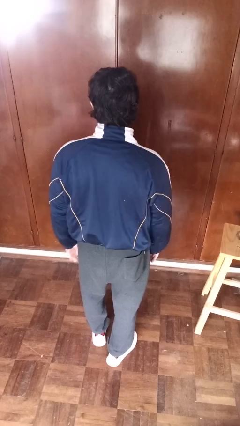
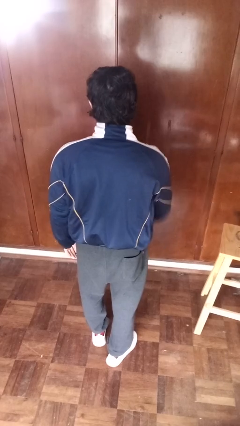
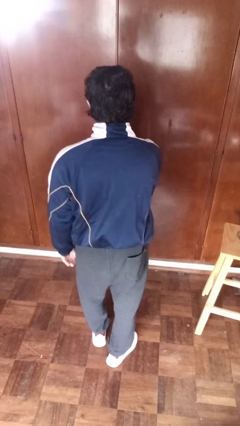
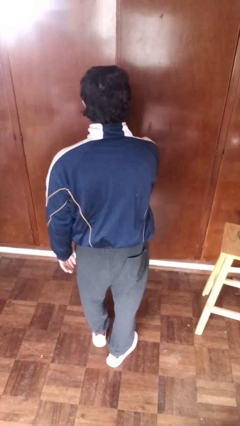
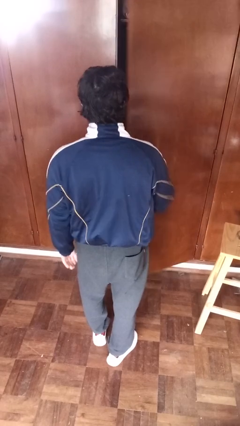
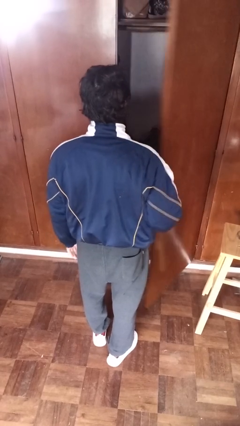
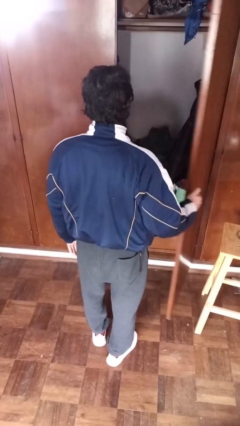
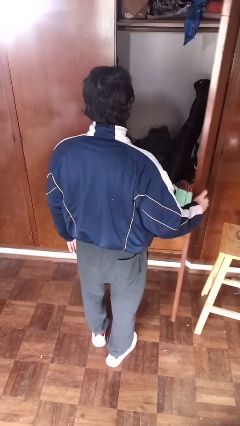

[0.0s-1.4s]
person opens closet door

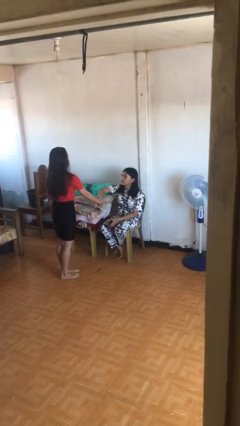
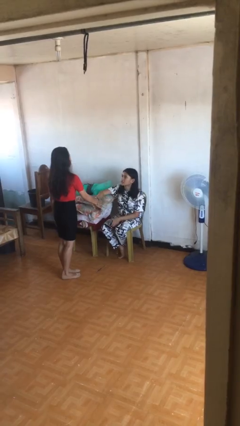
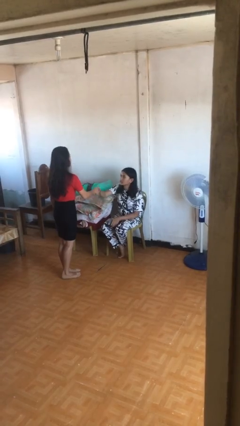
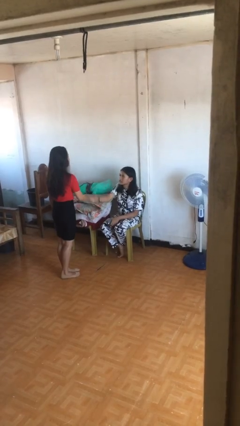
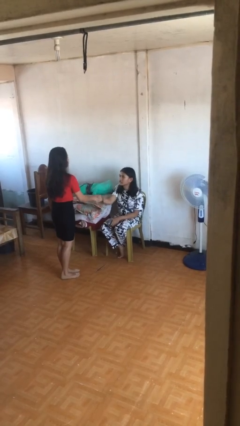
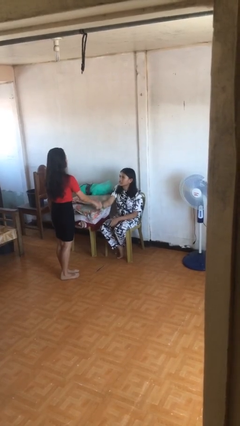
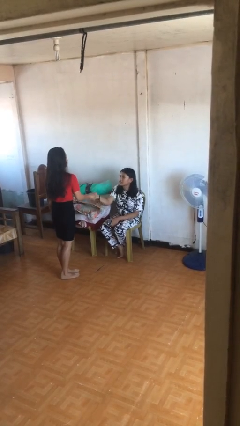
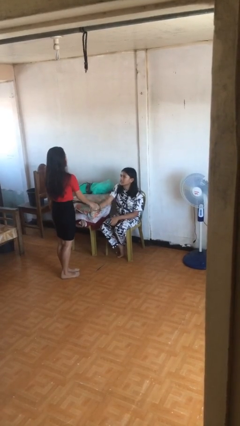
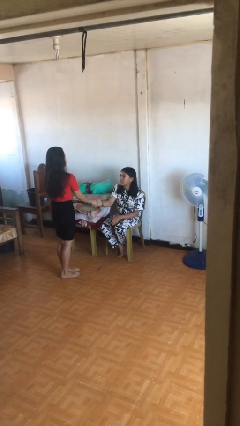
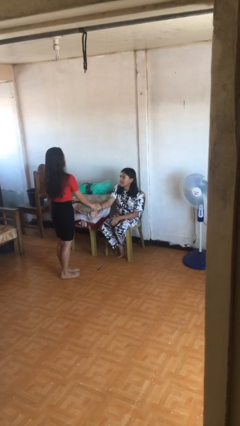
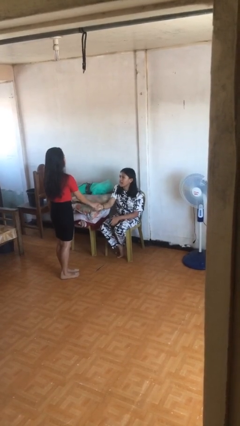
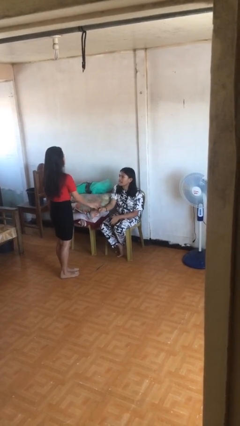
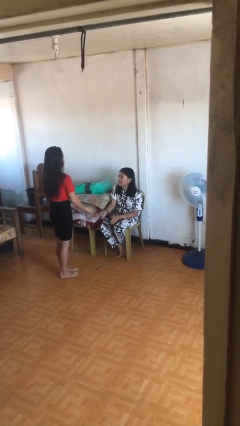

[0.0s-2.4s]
person shakes hand

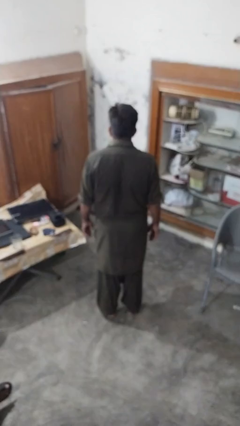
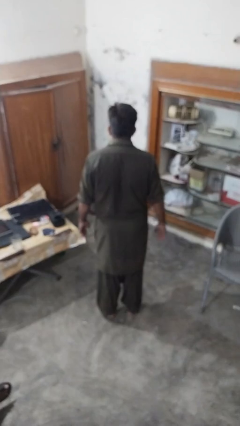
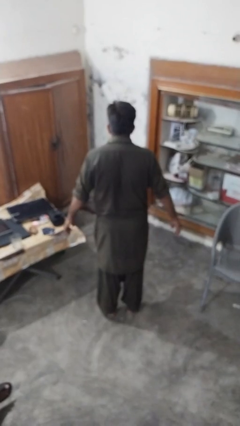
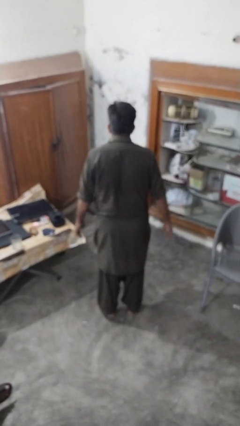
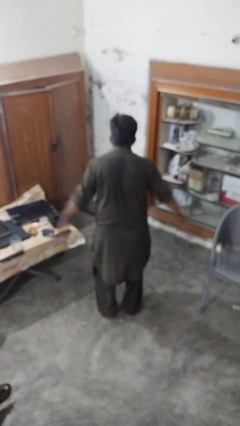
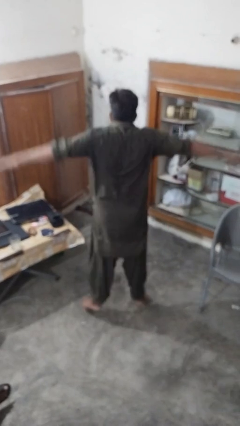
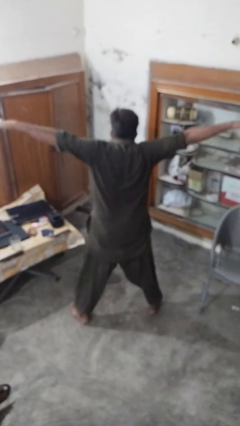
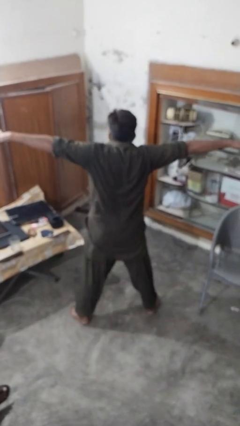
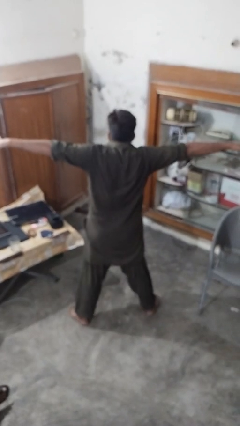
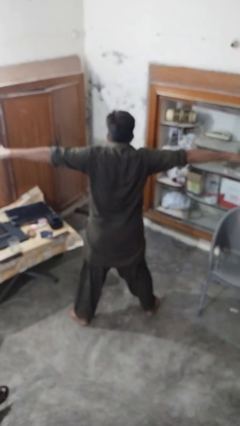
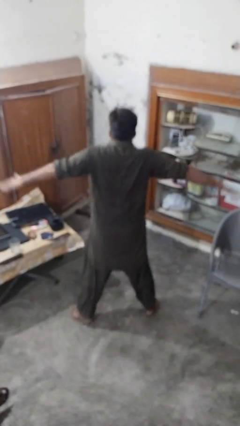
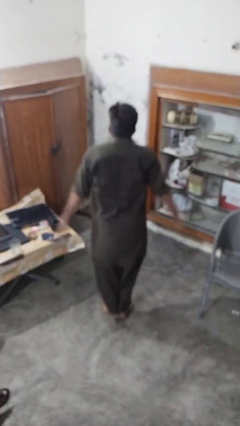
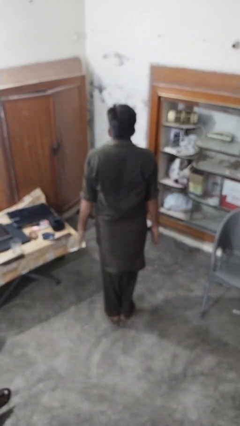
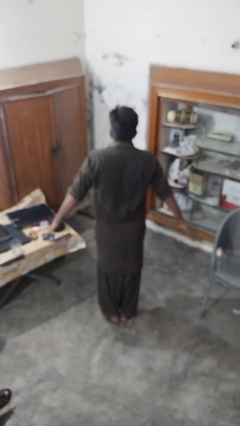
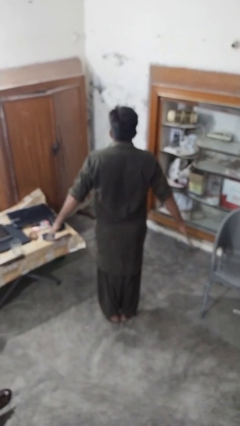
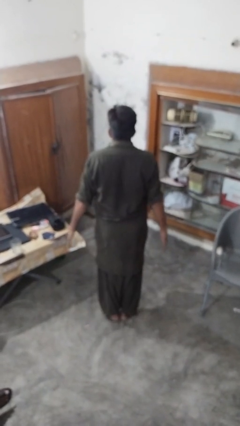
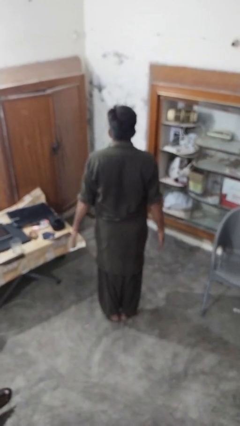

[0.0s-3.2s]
person exercises with jumping jacks

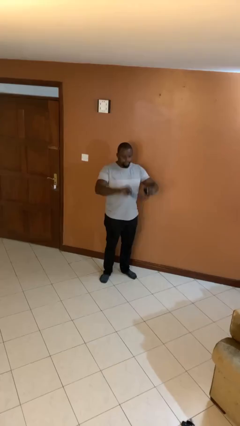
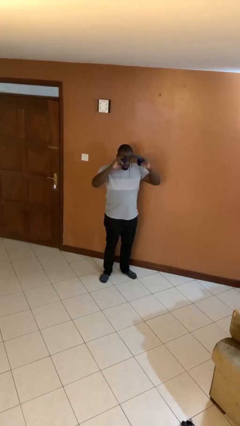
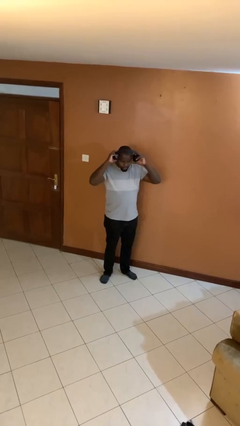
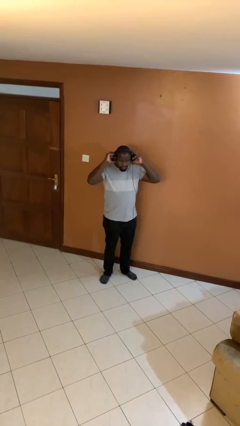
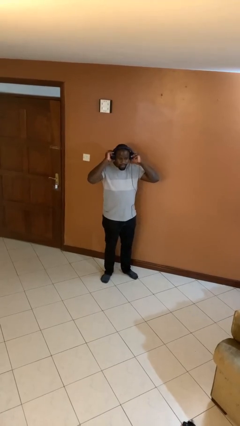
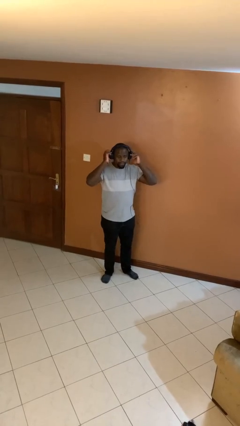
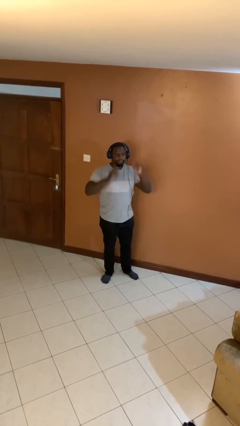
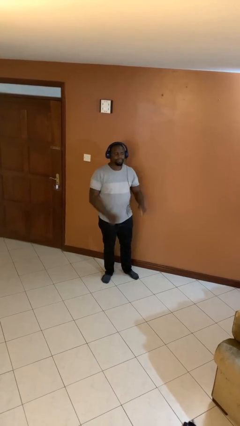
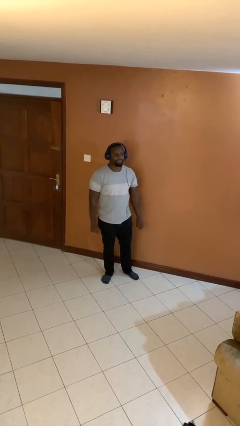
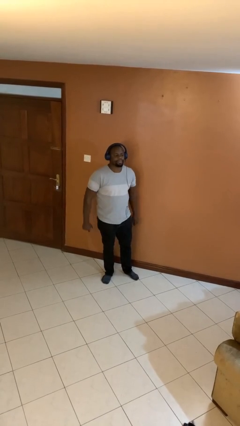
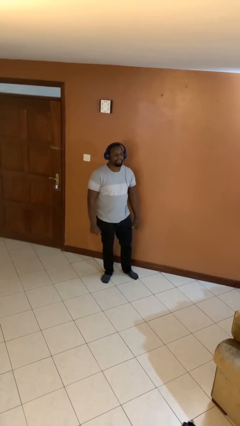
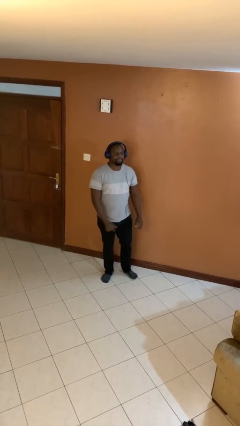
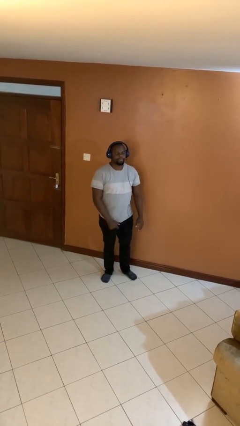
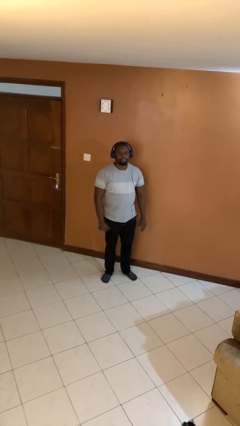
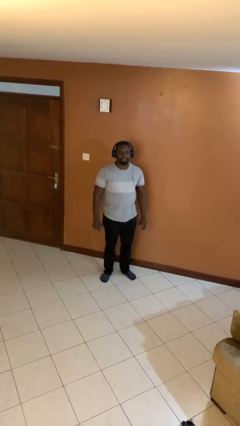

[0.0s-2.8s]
person puts on headphones

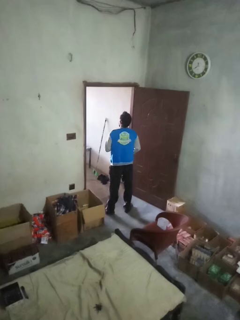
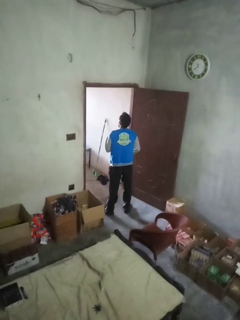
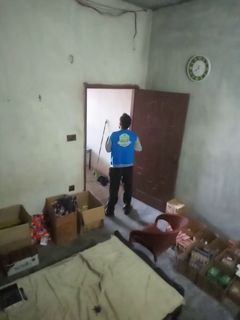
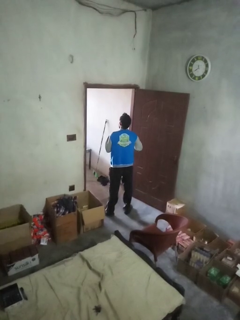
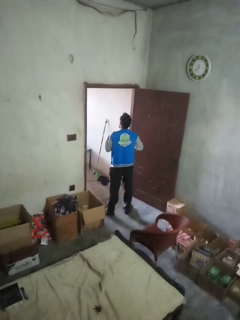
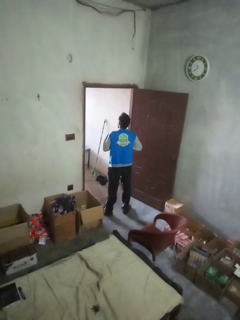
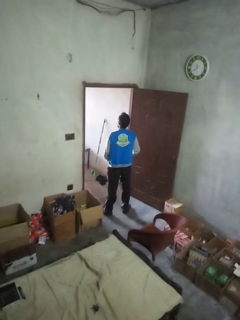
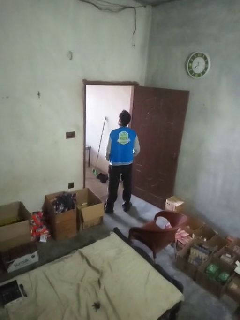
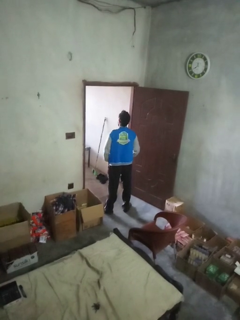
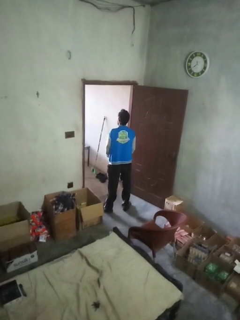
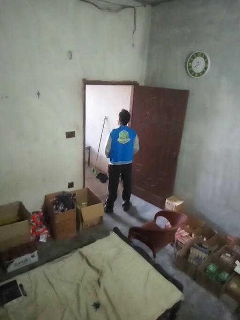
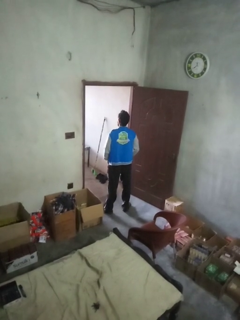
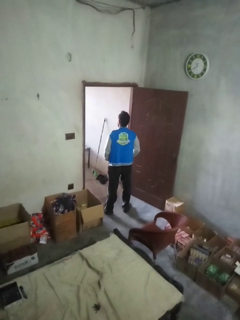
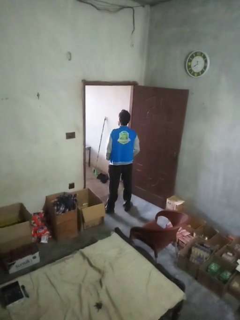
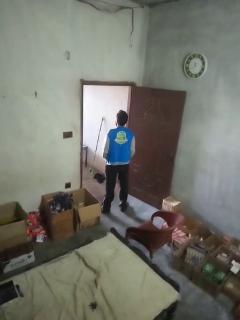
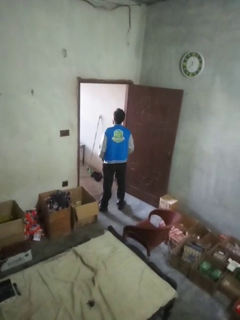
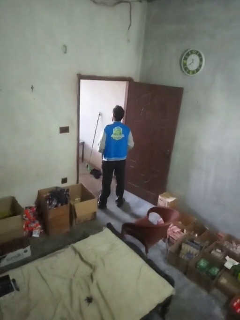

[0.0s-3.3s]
person unzips jacket

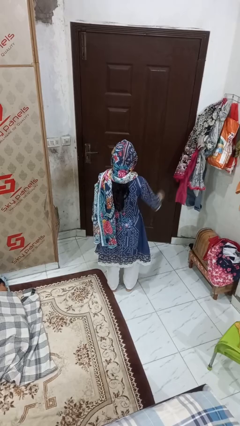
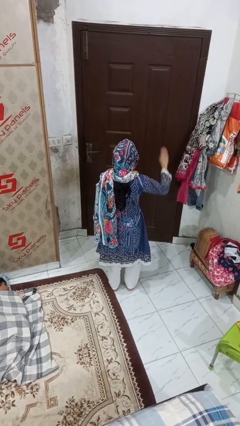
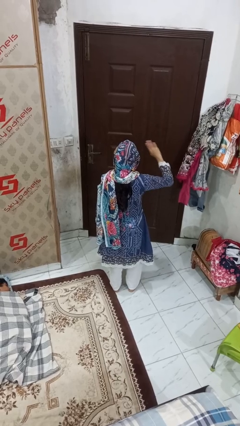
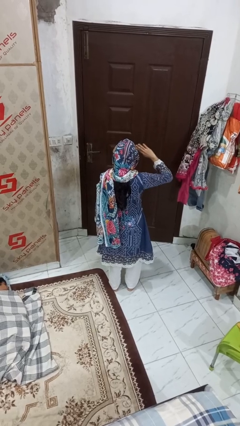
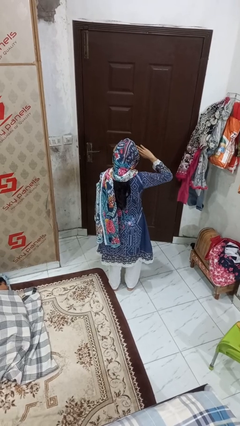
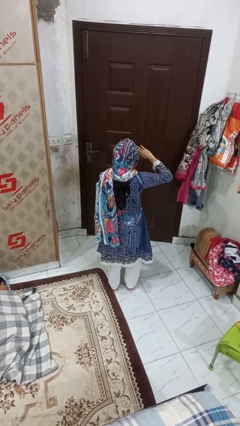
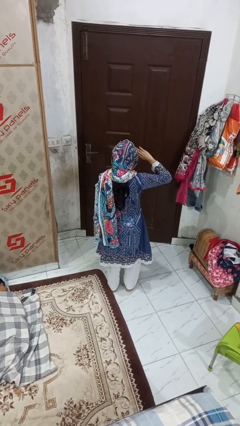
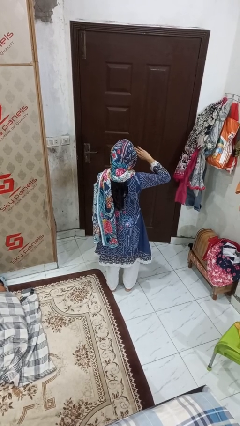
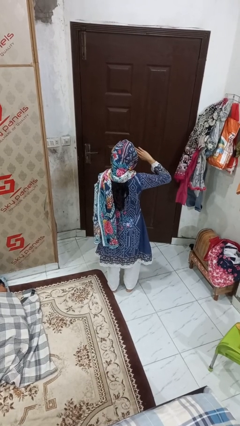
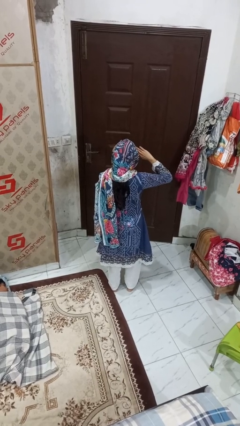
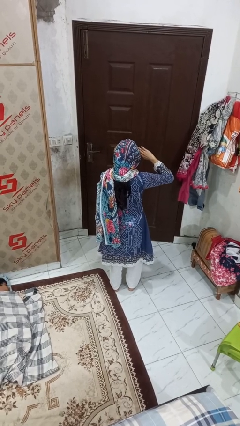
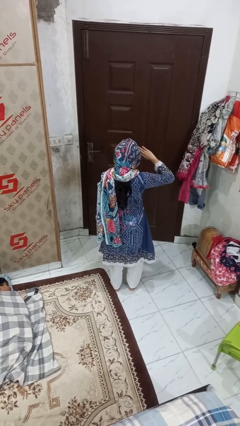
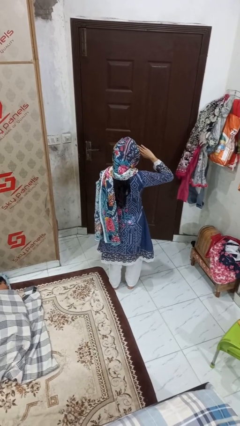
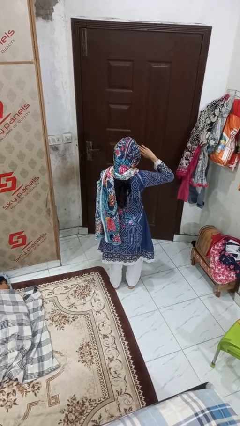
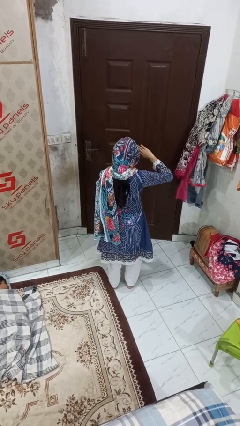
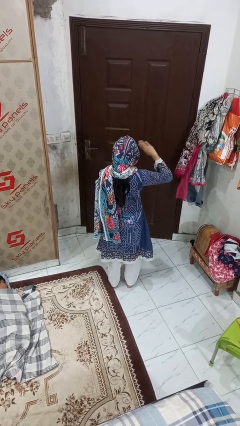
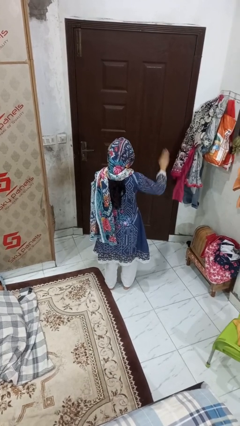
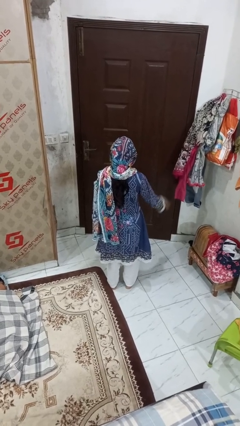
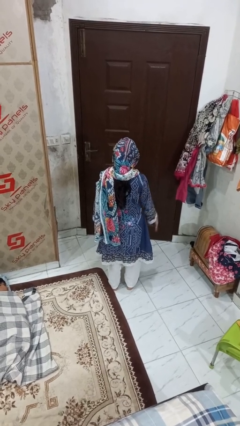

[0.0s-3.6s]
person salutes

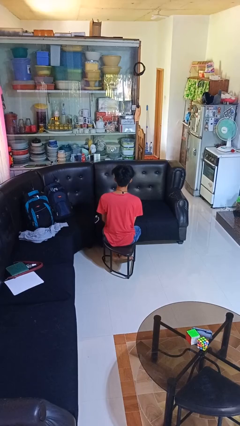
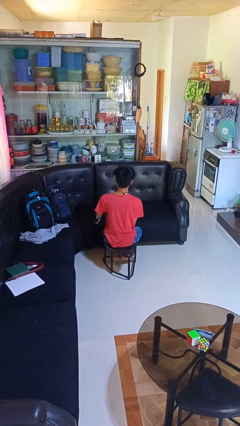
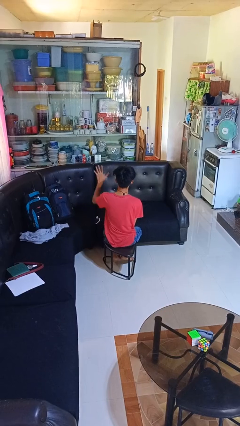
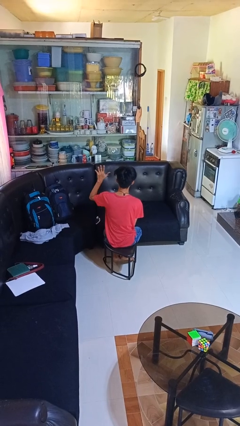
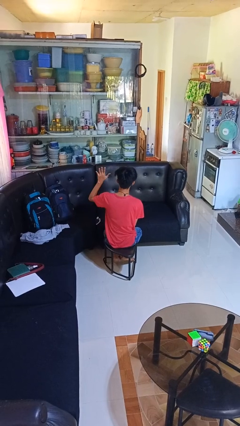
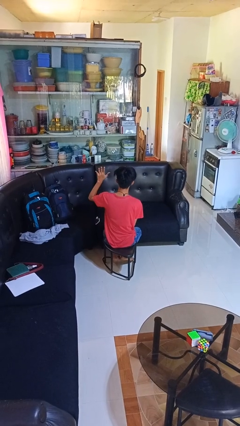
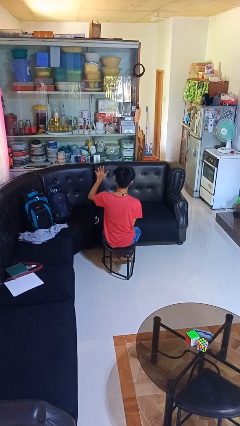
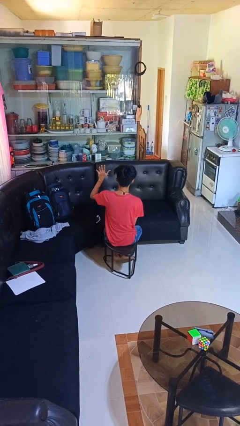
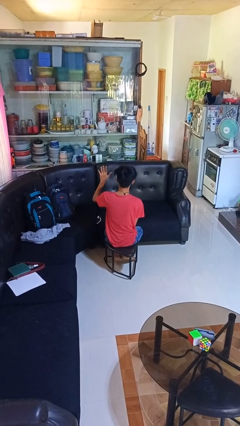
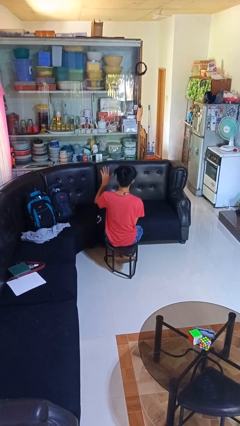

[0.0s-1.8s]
person gestures number five
